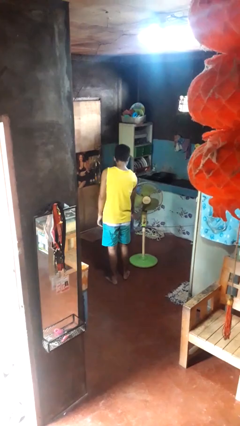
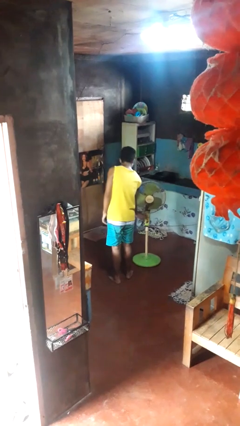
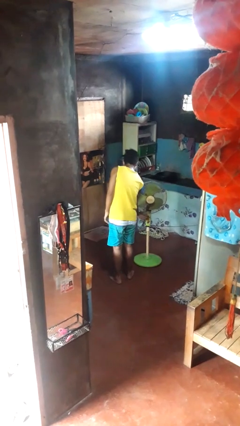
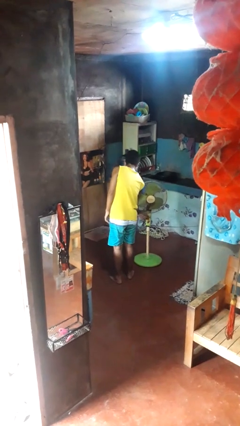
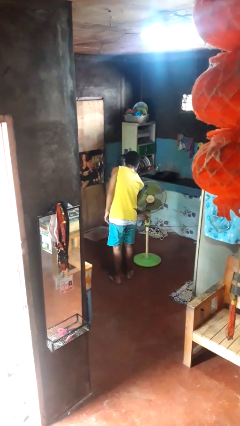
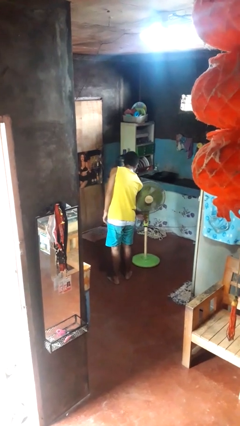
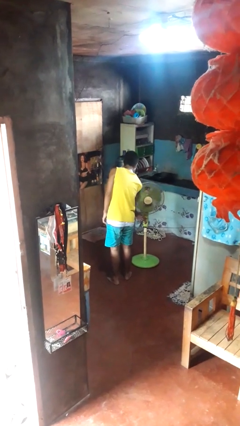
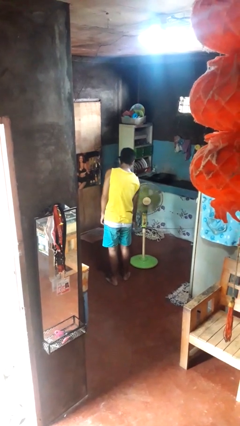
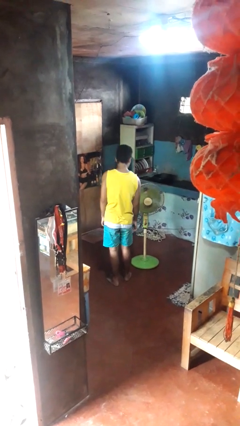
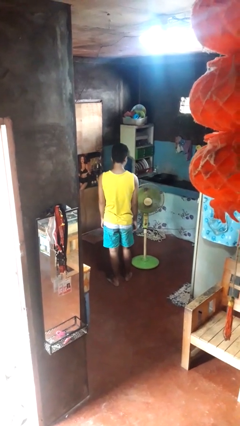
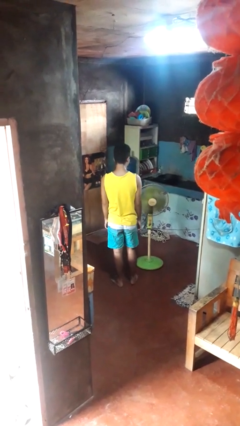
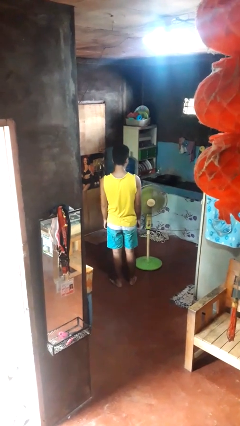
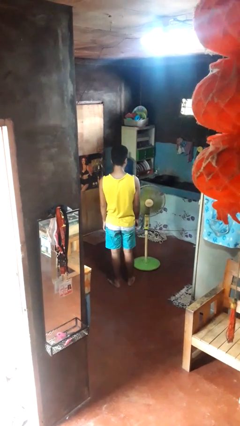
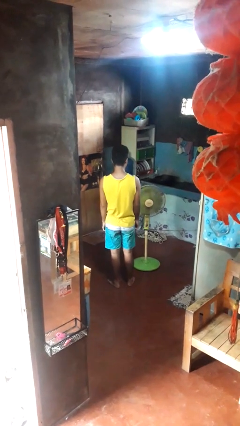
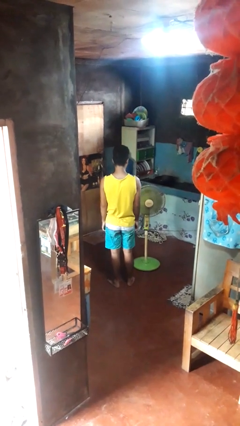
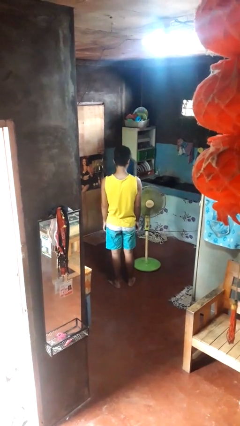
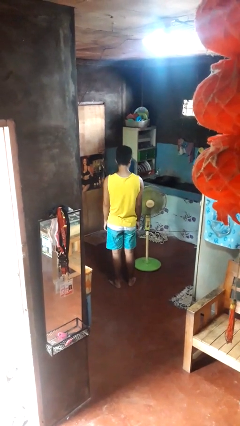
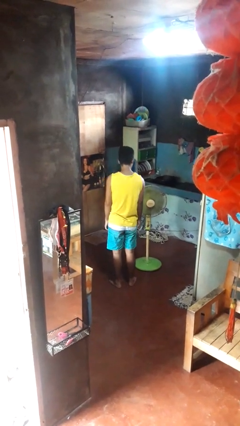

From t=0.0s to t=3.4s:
person turns on fan

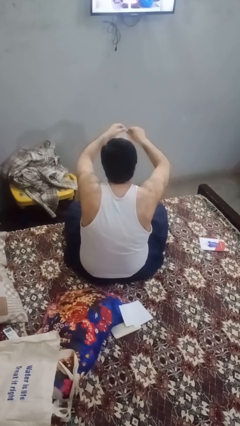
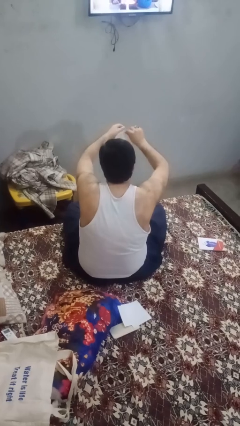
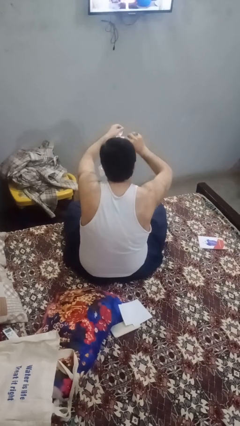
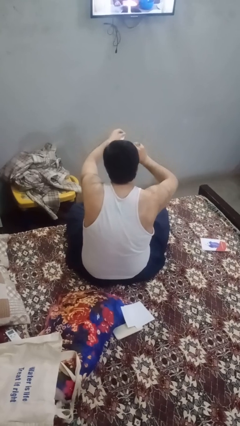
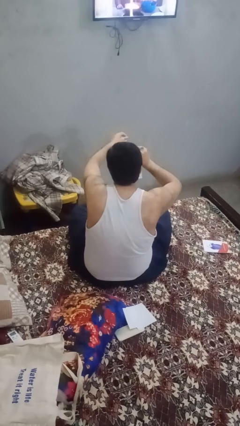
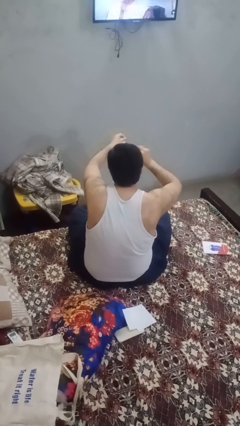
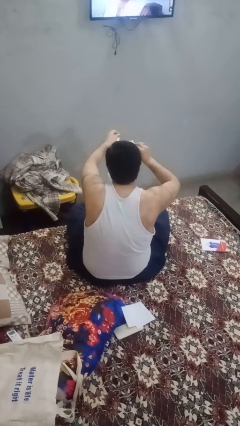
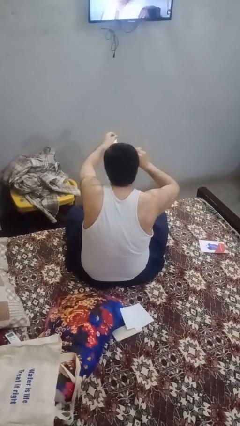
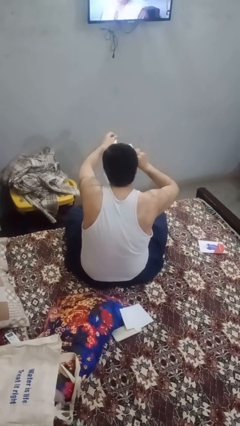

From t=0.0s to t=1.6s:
person tears paper

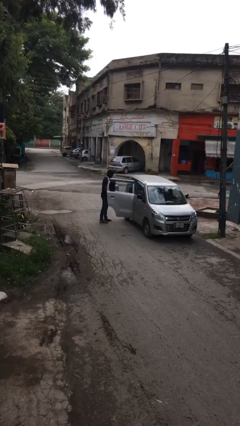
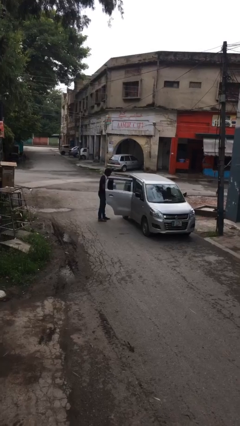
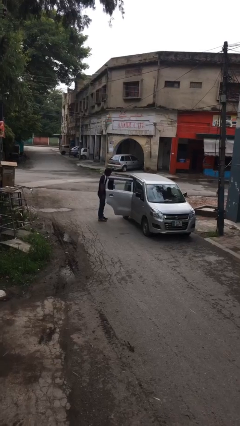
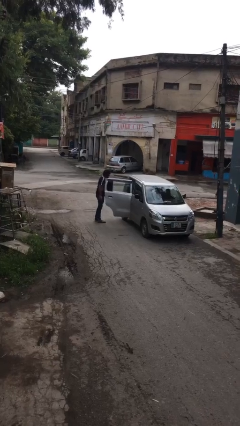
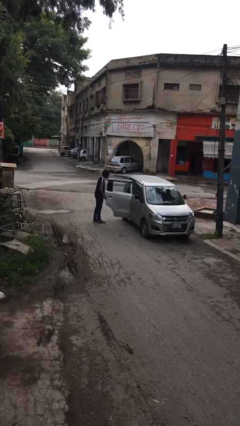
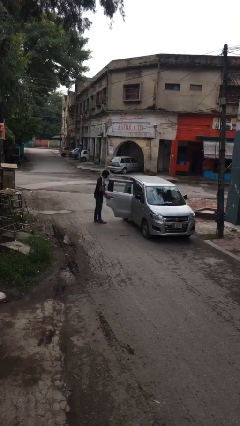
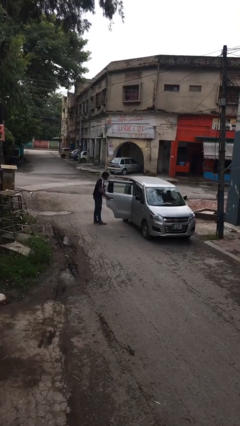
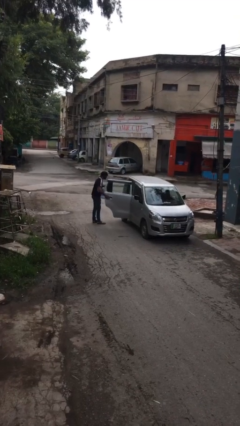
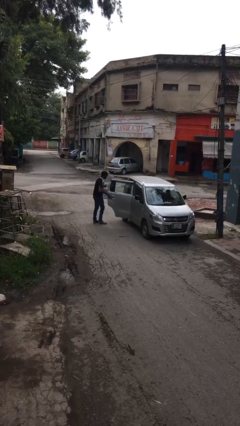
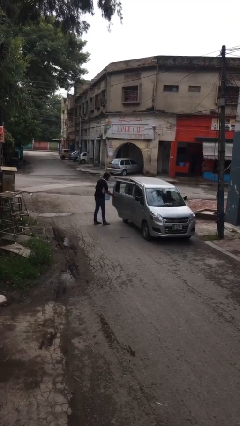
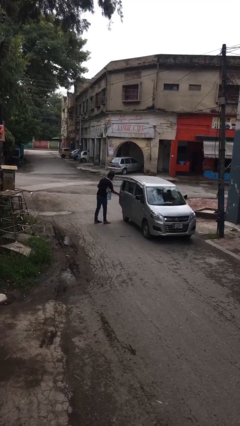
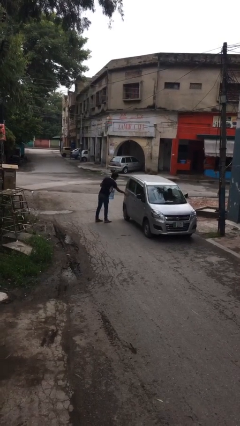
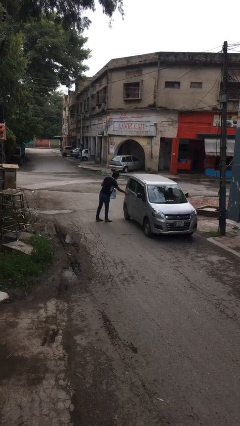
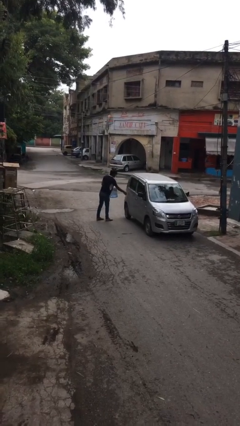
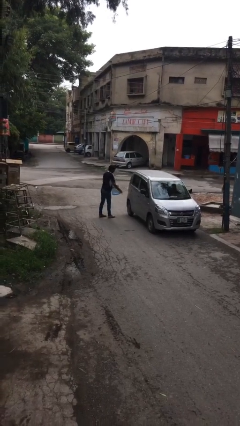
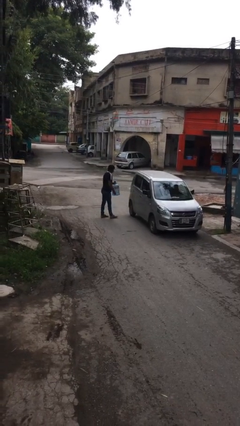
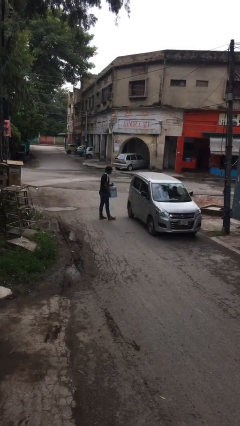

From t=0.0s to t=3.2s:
person closes car door

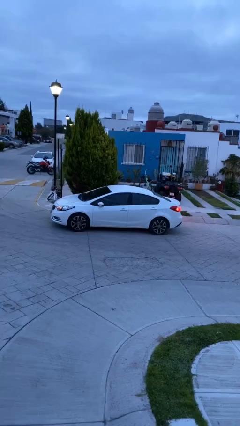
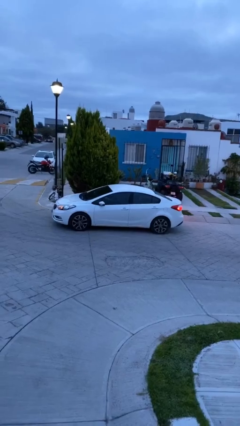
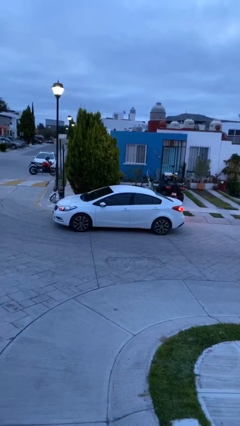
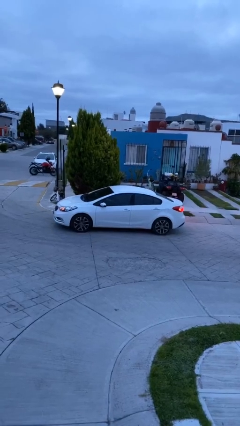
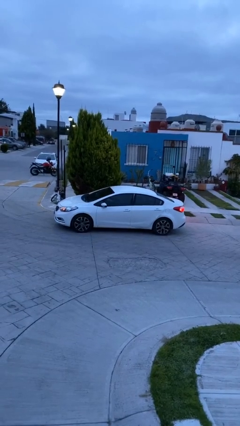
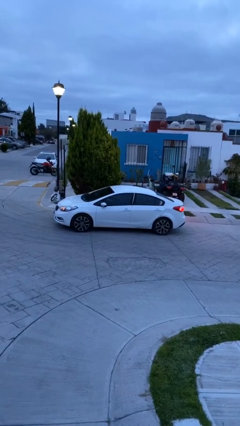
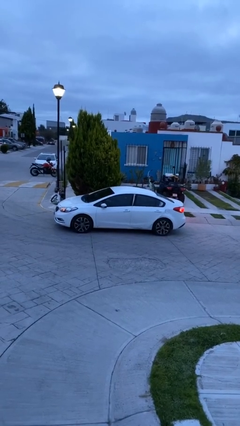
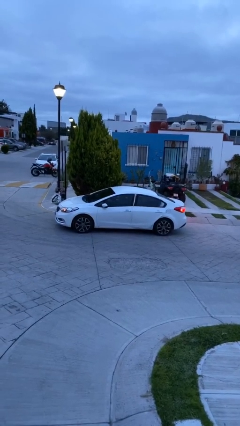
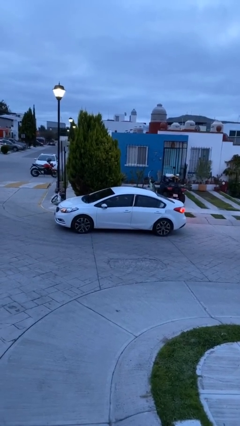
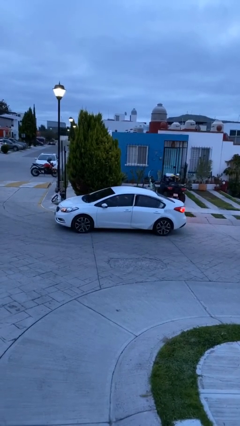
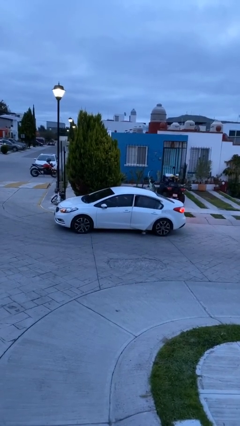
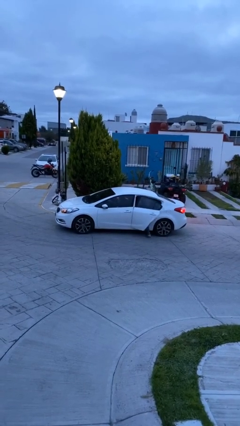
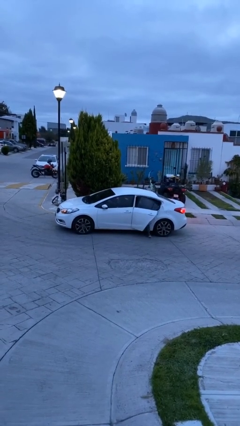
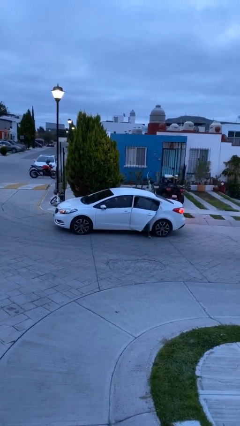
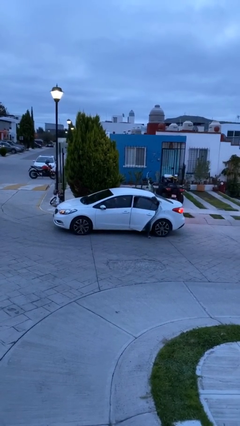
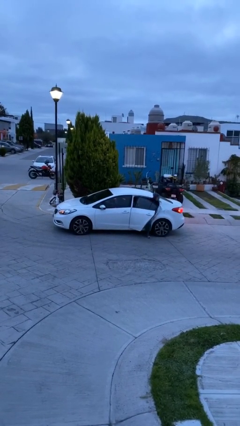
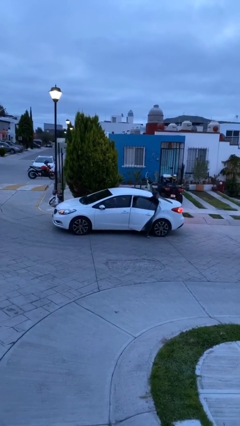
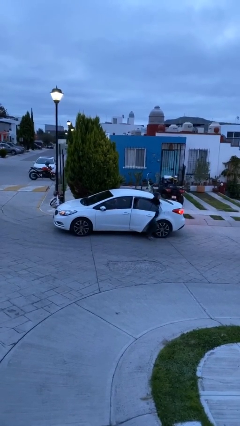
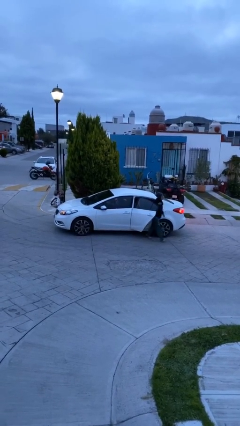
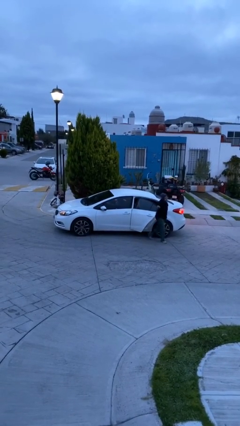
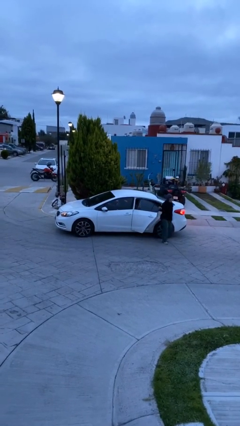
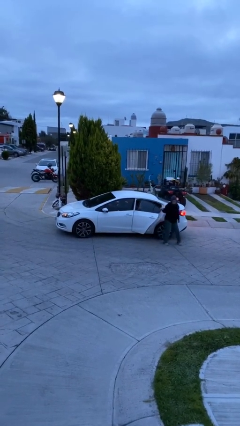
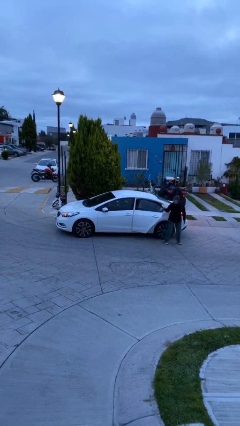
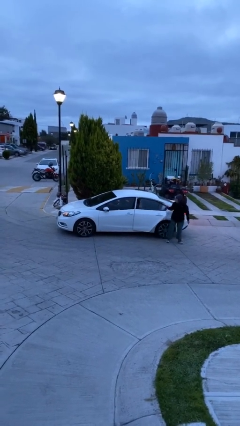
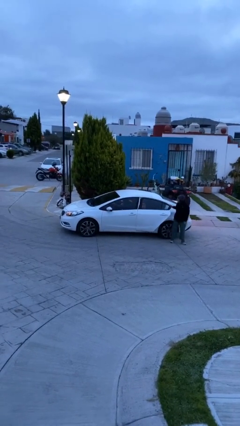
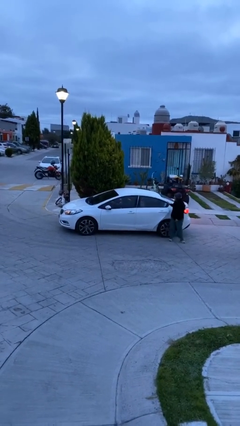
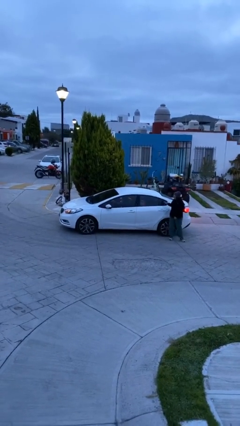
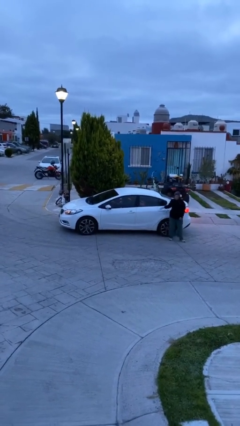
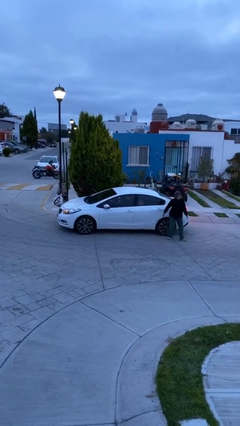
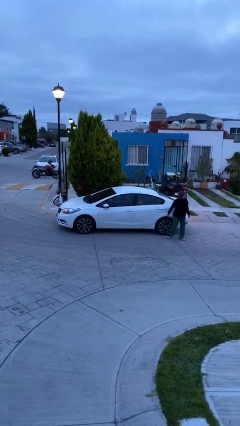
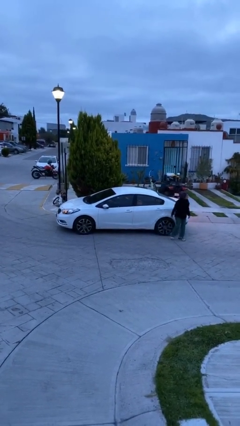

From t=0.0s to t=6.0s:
car drops off person

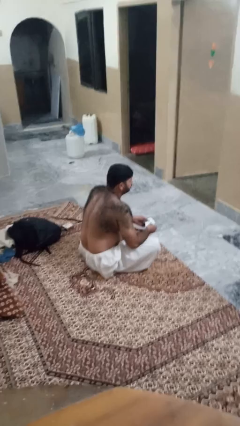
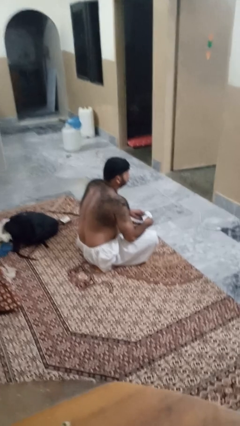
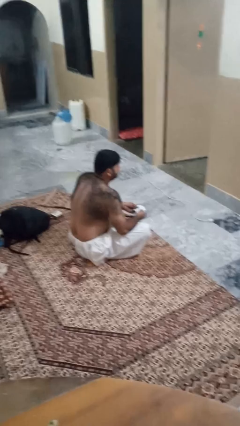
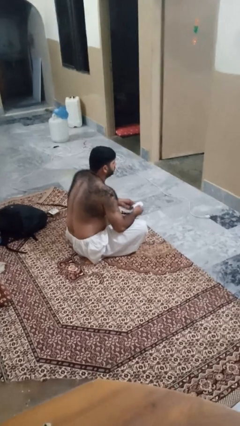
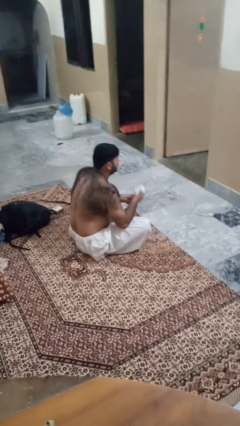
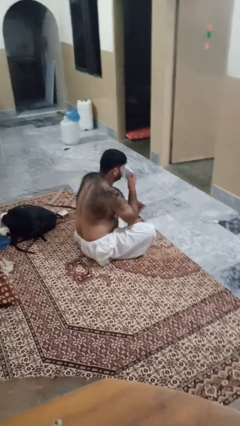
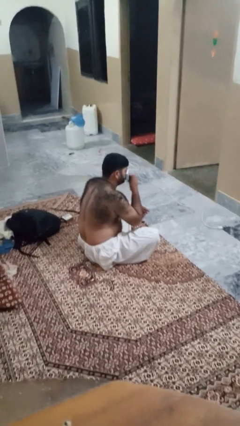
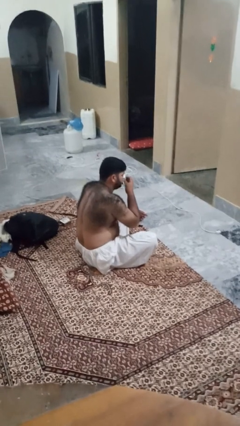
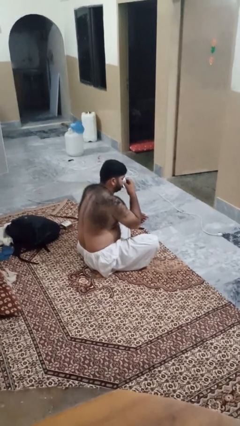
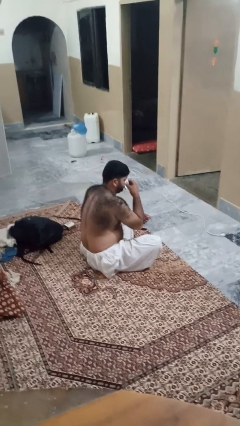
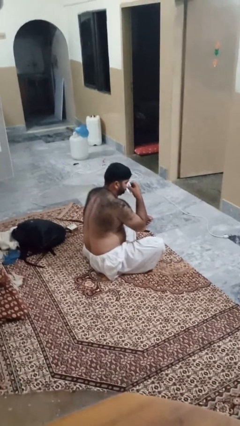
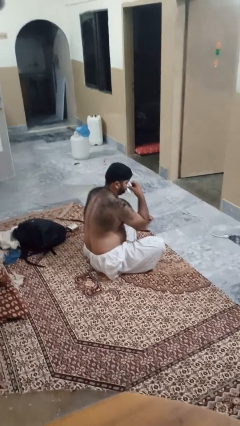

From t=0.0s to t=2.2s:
person blows nose

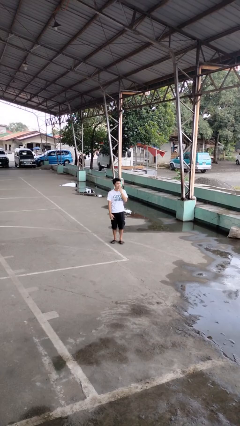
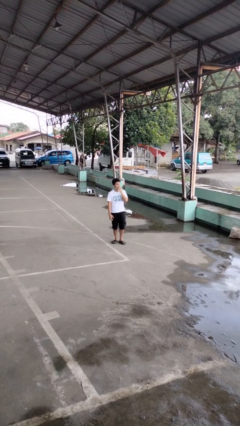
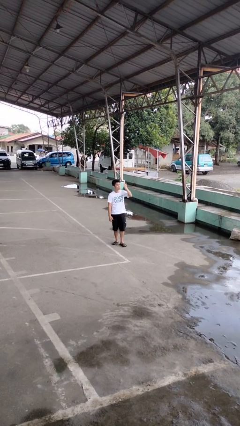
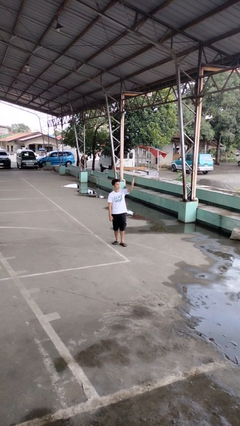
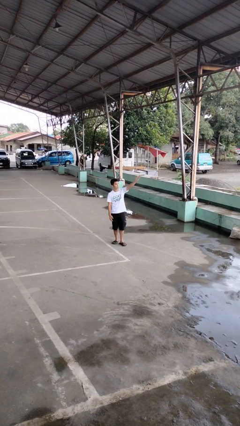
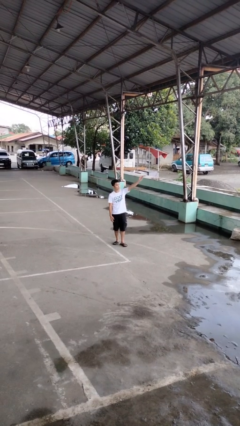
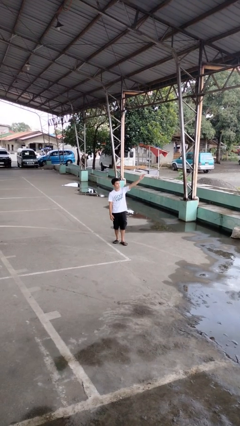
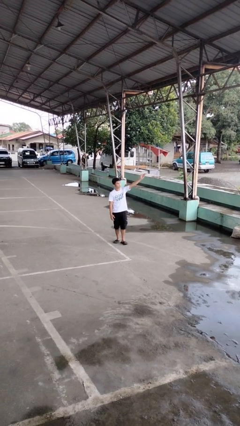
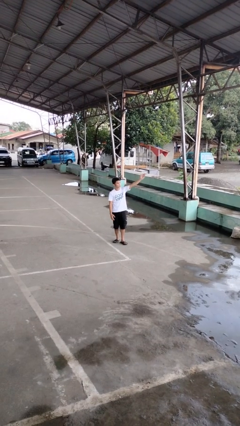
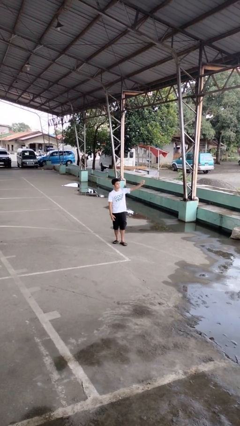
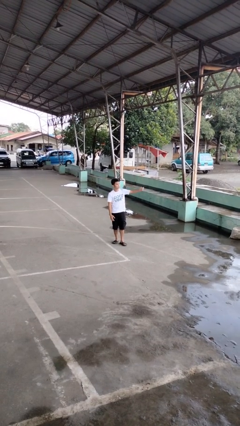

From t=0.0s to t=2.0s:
person gestures blow kiss
